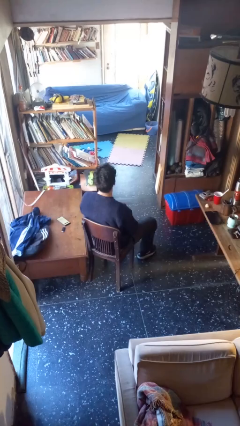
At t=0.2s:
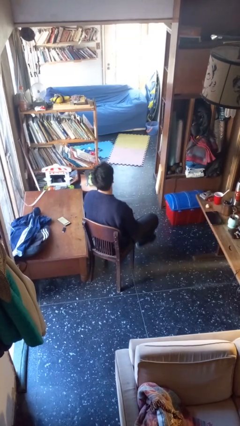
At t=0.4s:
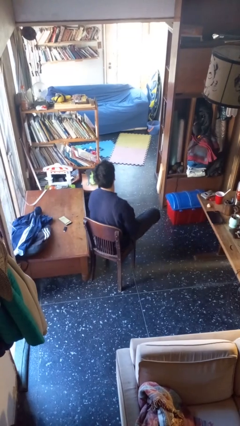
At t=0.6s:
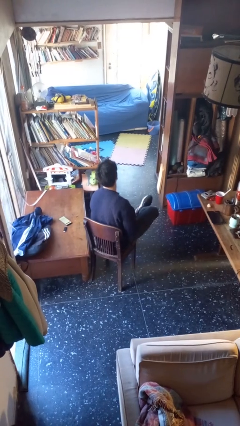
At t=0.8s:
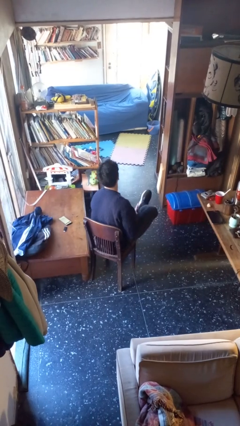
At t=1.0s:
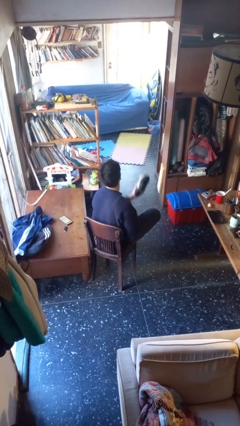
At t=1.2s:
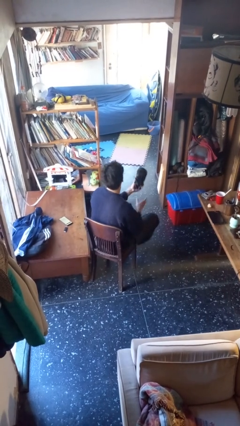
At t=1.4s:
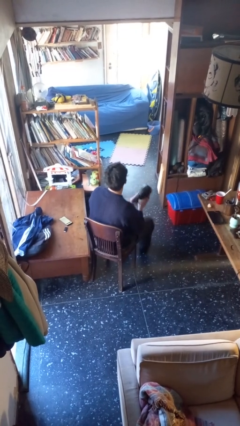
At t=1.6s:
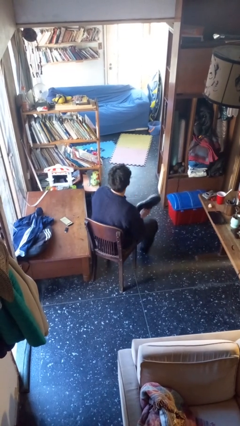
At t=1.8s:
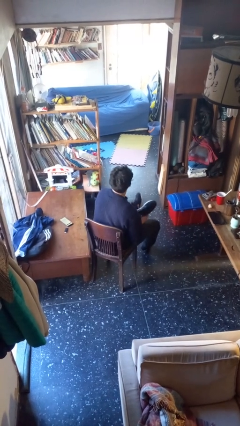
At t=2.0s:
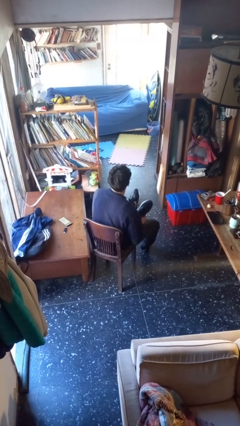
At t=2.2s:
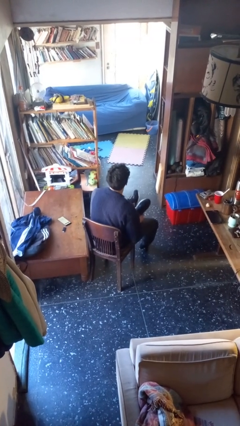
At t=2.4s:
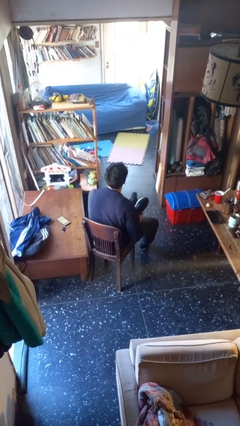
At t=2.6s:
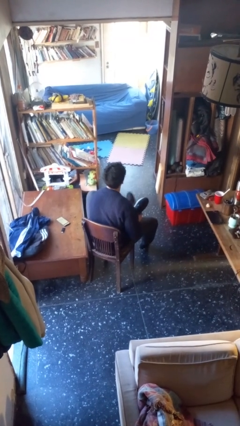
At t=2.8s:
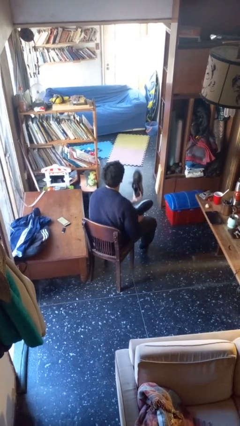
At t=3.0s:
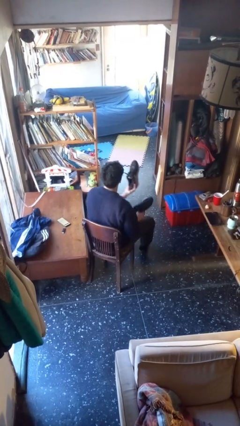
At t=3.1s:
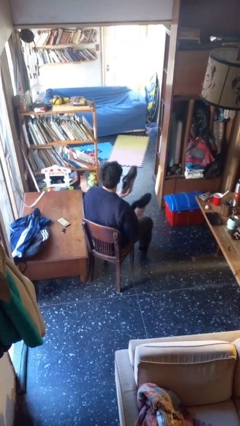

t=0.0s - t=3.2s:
person takes off shoes

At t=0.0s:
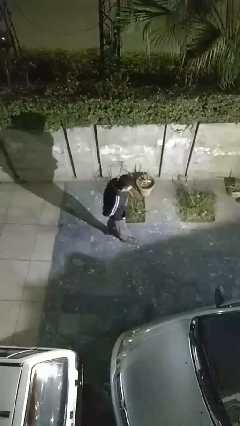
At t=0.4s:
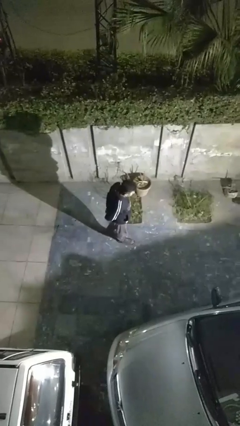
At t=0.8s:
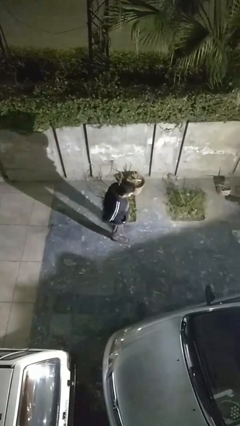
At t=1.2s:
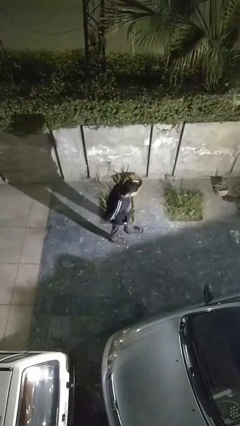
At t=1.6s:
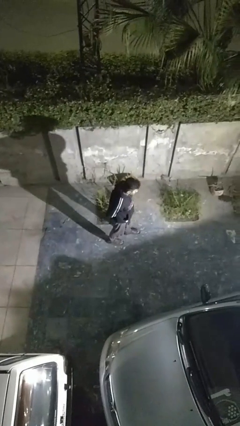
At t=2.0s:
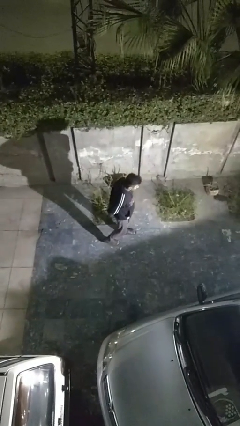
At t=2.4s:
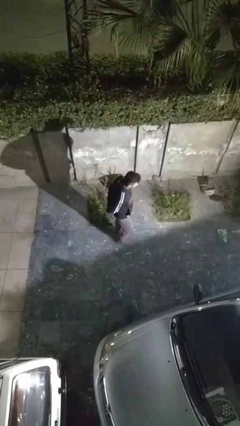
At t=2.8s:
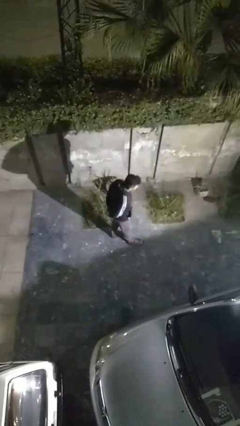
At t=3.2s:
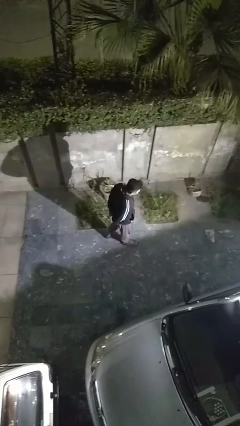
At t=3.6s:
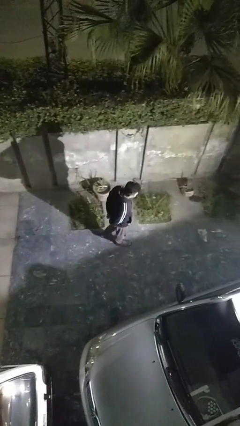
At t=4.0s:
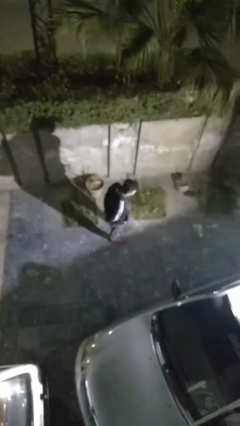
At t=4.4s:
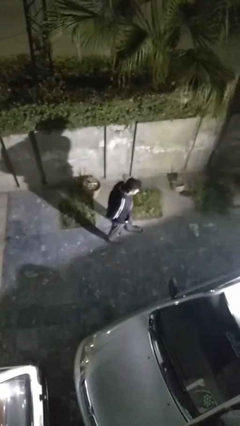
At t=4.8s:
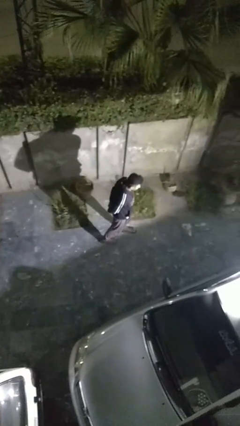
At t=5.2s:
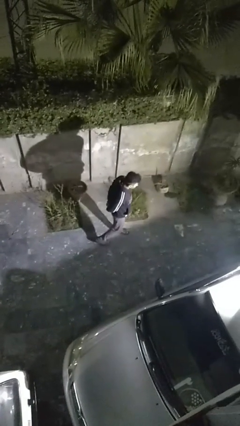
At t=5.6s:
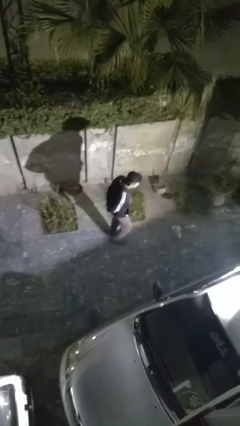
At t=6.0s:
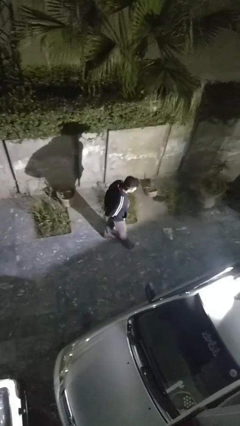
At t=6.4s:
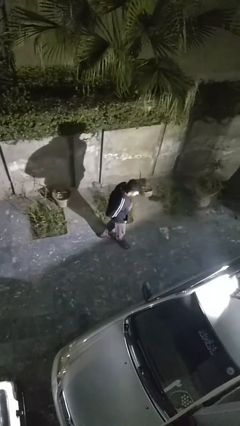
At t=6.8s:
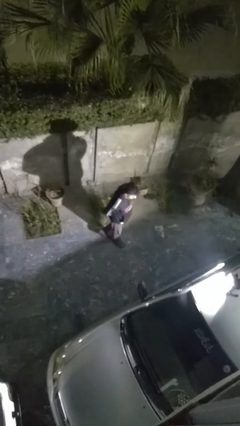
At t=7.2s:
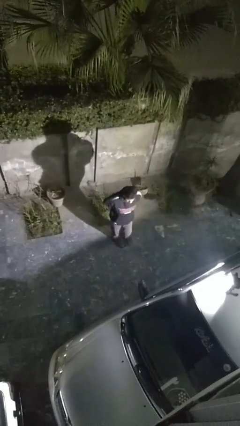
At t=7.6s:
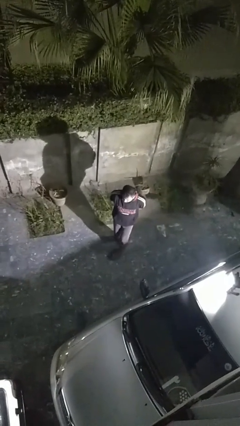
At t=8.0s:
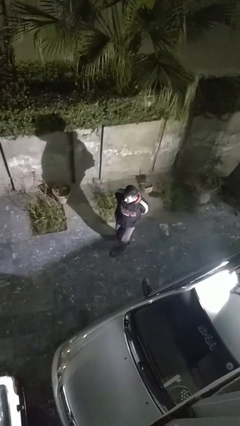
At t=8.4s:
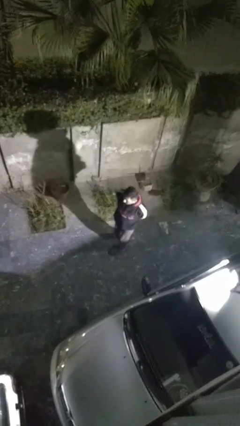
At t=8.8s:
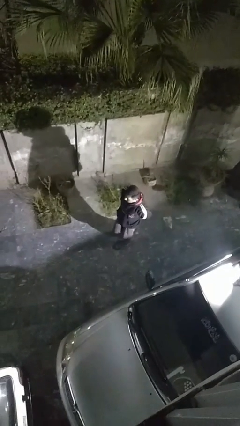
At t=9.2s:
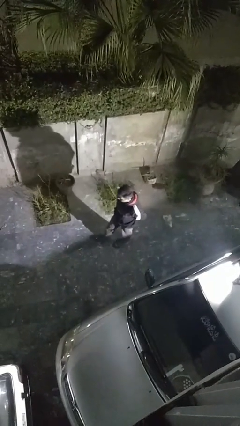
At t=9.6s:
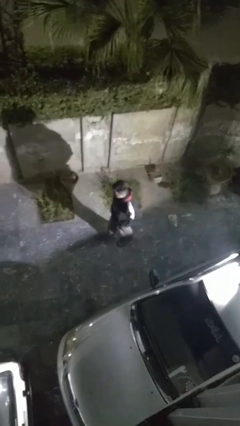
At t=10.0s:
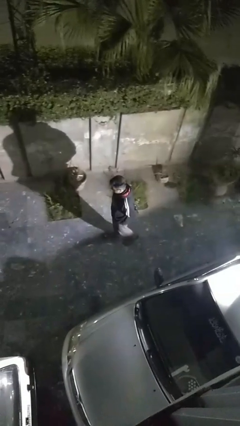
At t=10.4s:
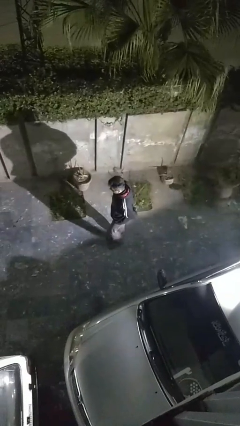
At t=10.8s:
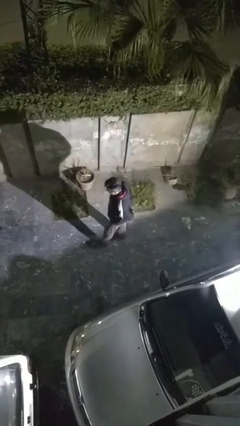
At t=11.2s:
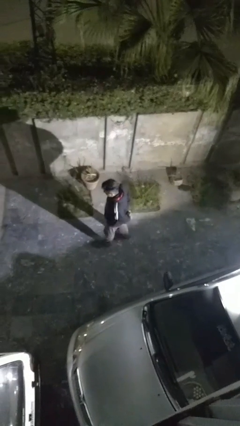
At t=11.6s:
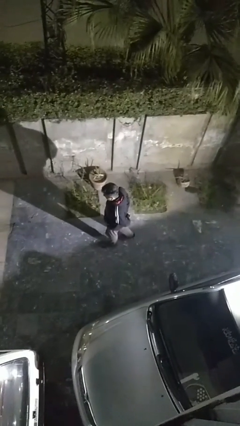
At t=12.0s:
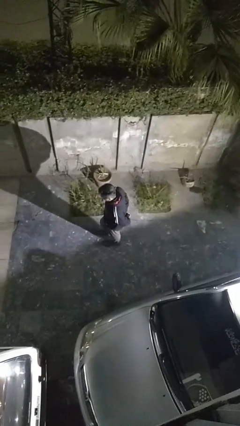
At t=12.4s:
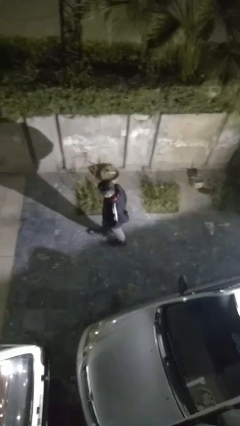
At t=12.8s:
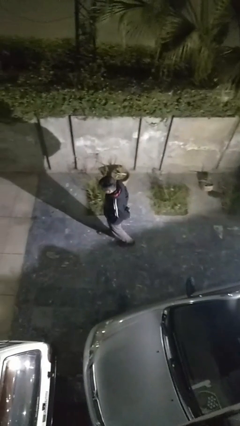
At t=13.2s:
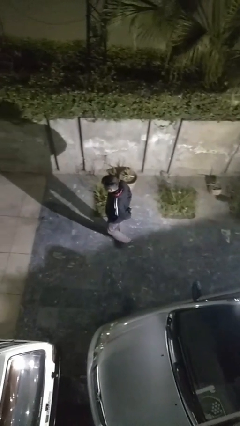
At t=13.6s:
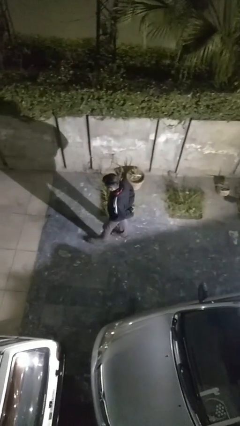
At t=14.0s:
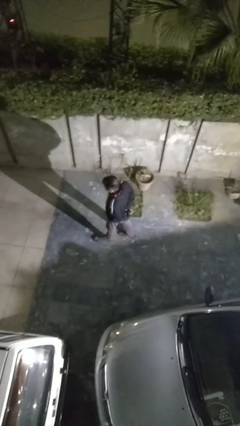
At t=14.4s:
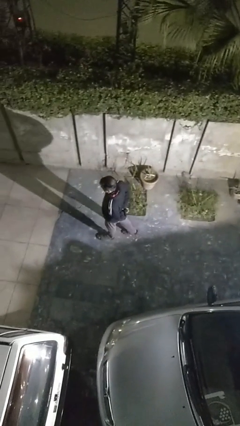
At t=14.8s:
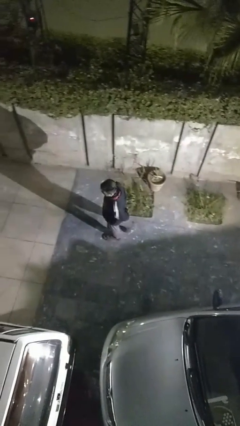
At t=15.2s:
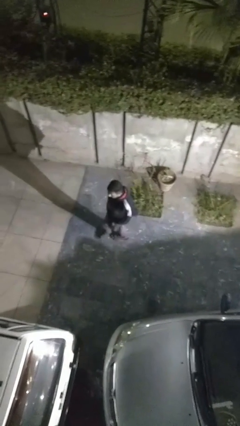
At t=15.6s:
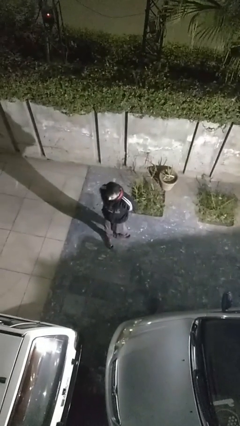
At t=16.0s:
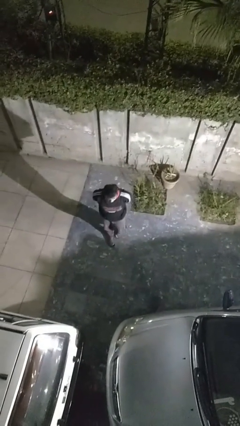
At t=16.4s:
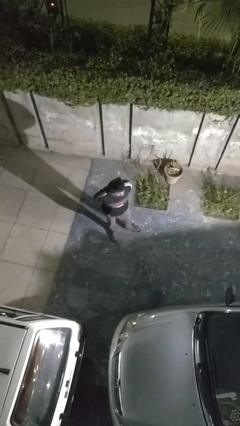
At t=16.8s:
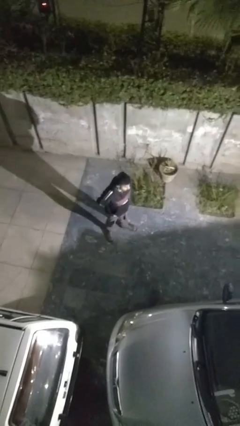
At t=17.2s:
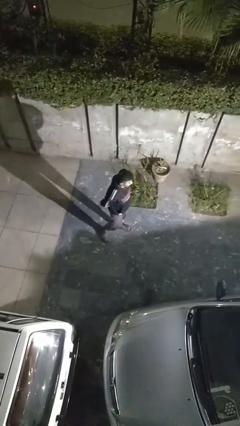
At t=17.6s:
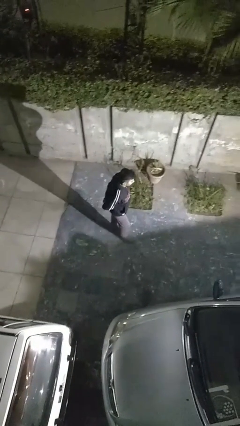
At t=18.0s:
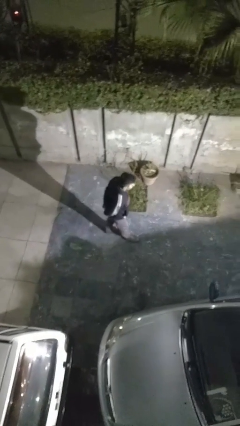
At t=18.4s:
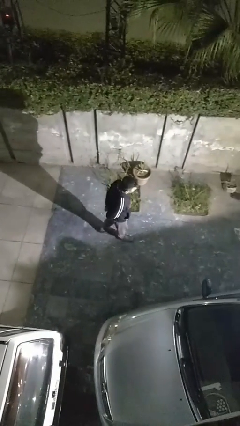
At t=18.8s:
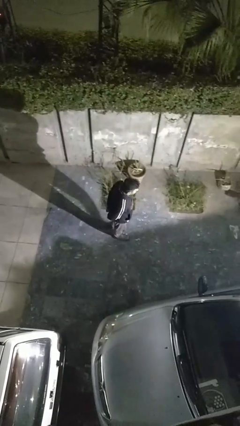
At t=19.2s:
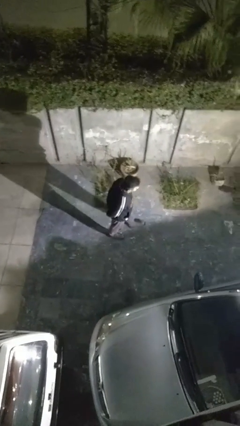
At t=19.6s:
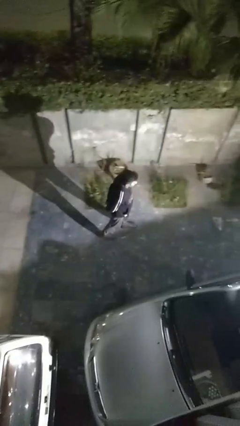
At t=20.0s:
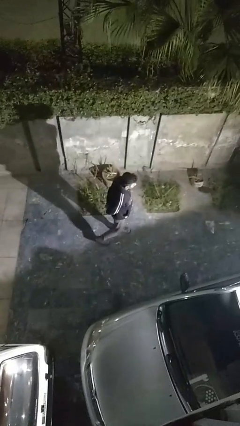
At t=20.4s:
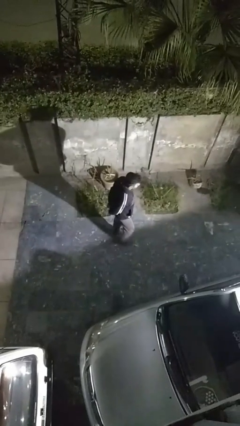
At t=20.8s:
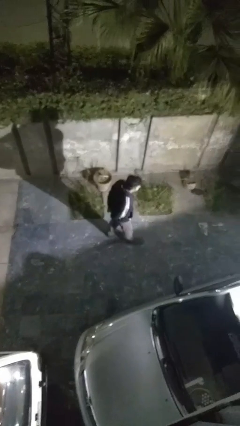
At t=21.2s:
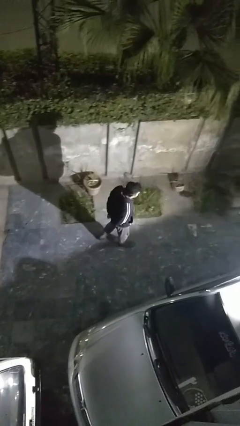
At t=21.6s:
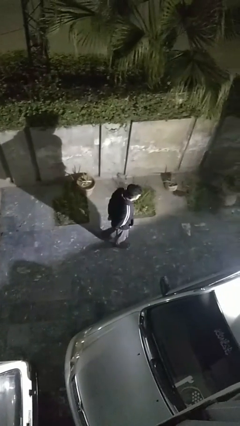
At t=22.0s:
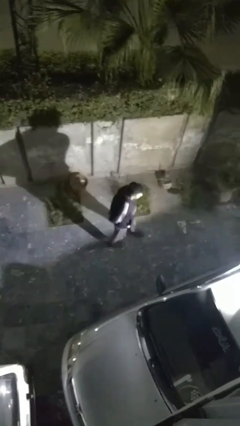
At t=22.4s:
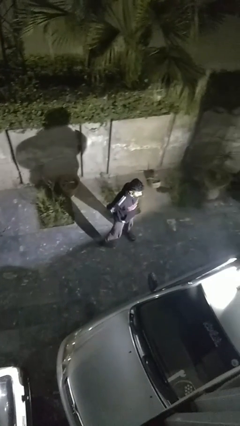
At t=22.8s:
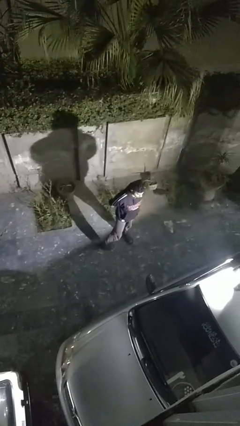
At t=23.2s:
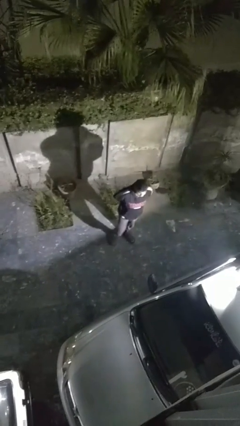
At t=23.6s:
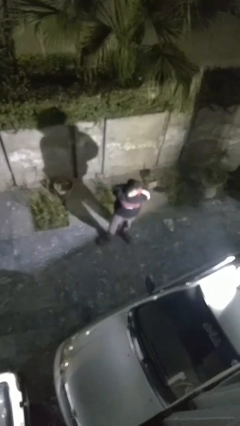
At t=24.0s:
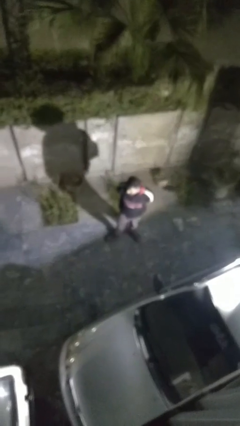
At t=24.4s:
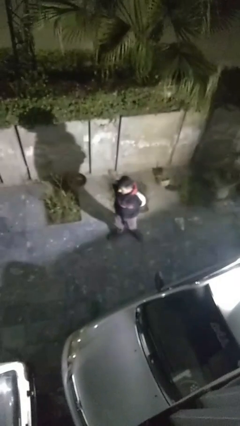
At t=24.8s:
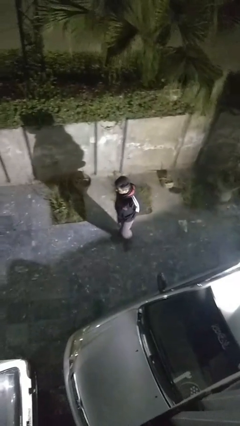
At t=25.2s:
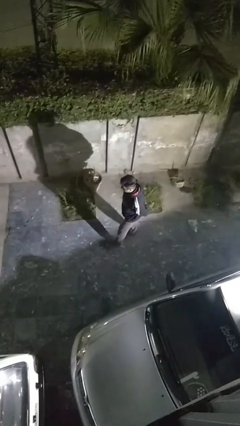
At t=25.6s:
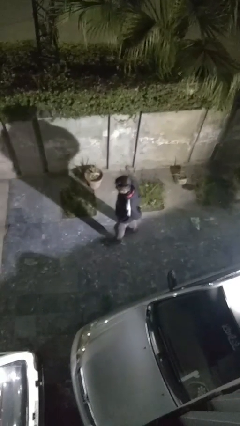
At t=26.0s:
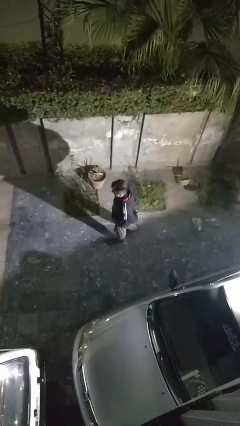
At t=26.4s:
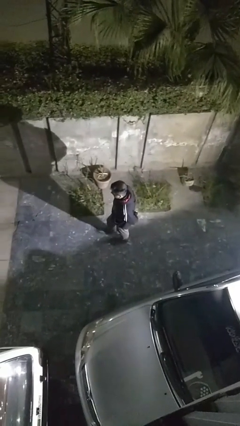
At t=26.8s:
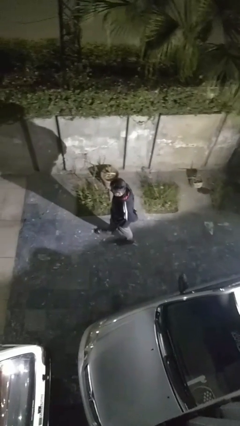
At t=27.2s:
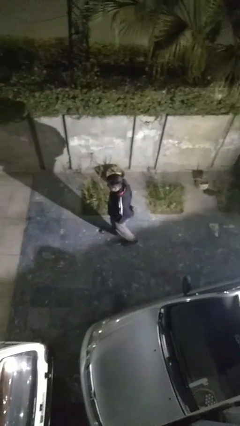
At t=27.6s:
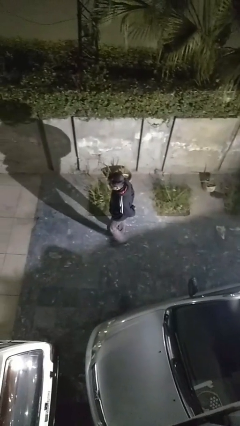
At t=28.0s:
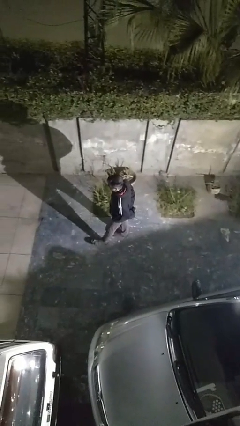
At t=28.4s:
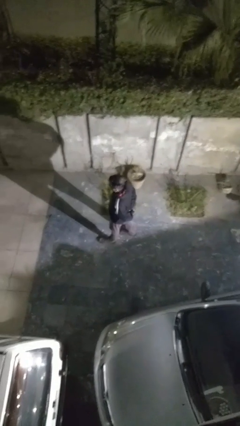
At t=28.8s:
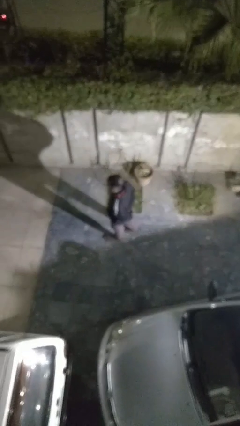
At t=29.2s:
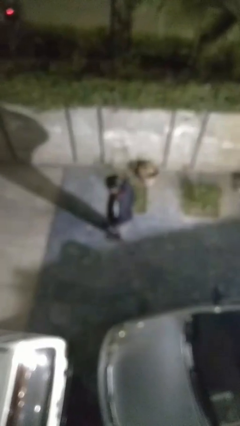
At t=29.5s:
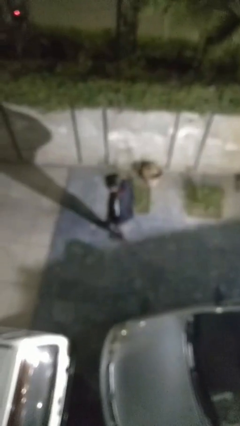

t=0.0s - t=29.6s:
person walks

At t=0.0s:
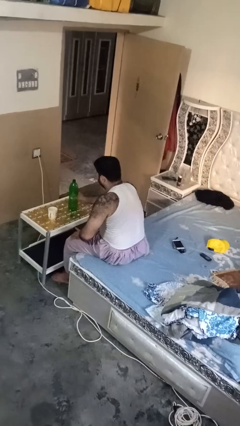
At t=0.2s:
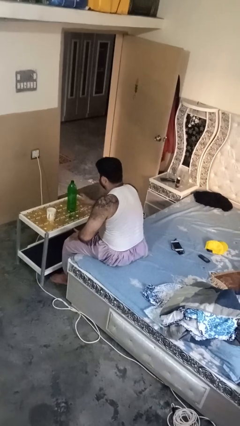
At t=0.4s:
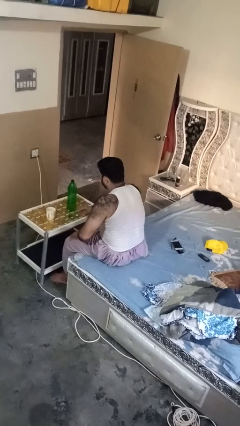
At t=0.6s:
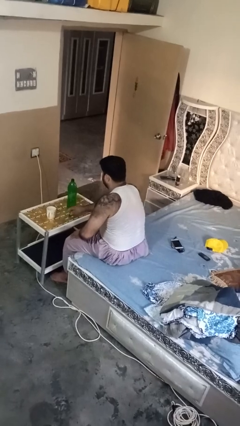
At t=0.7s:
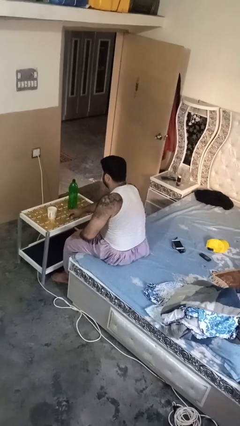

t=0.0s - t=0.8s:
person screws lid to bottle
